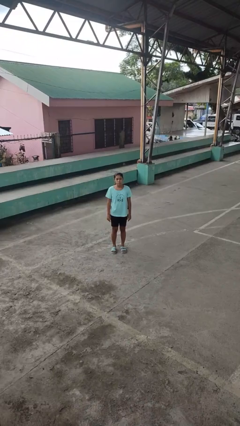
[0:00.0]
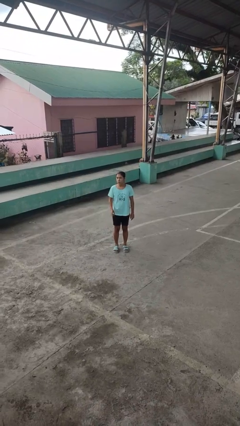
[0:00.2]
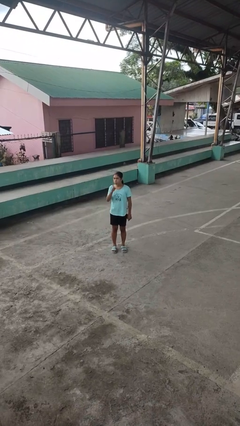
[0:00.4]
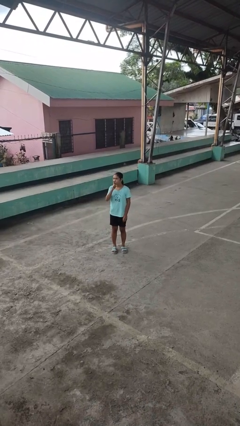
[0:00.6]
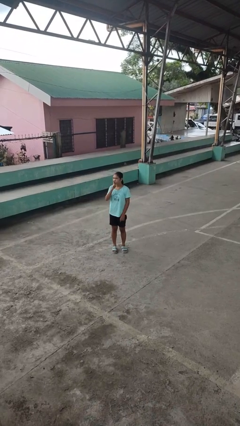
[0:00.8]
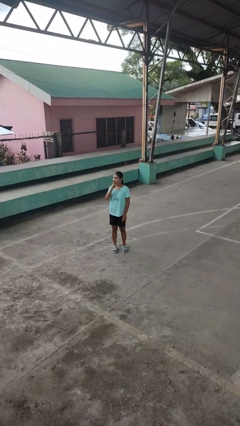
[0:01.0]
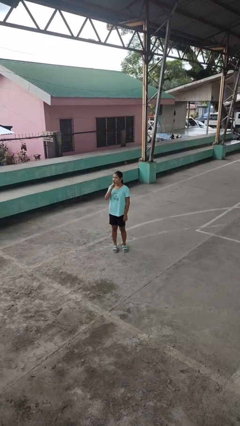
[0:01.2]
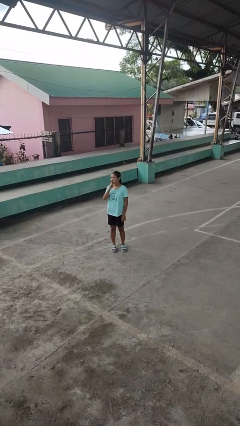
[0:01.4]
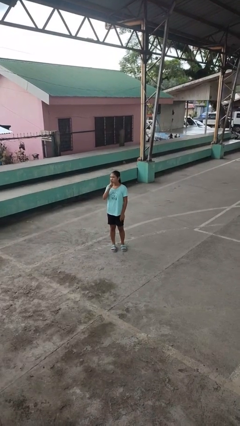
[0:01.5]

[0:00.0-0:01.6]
person gestures be quiet

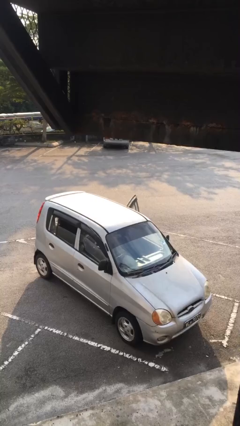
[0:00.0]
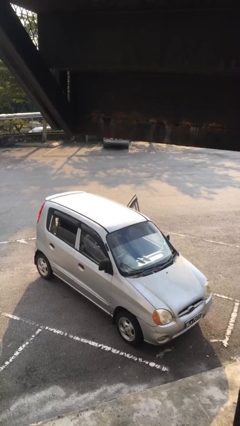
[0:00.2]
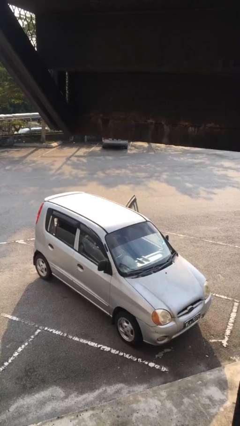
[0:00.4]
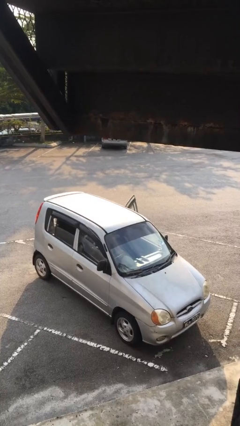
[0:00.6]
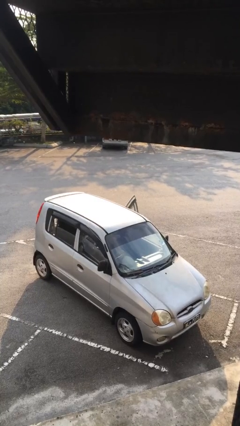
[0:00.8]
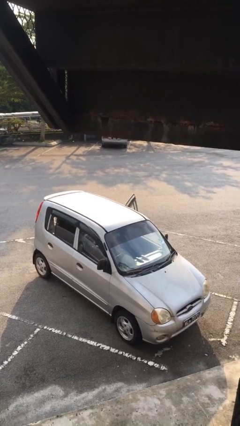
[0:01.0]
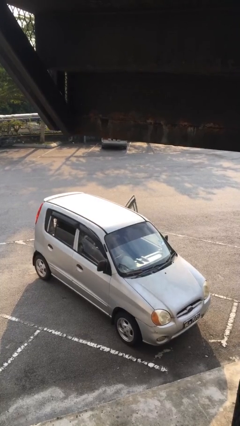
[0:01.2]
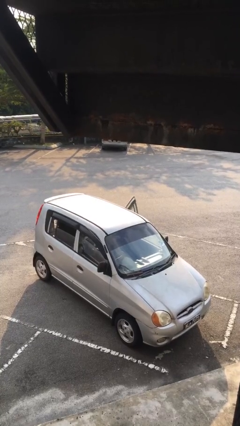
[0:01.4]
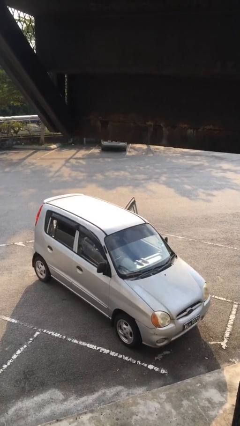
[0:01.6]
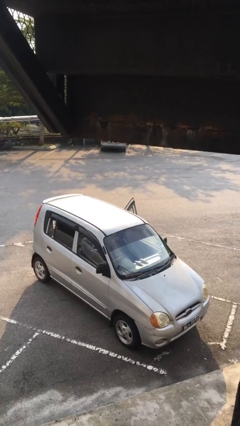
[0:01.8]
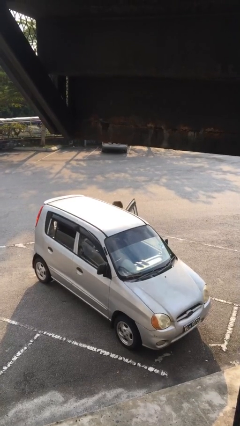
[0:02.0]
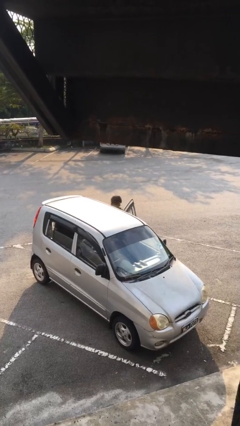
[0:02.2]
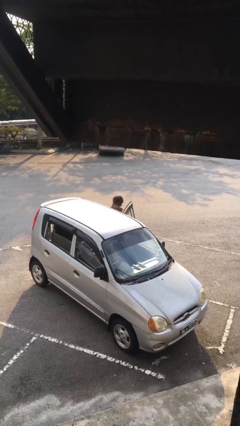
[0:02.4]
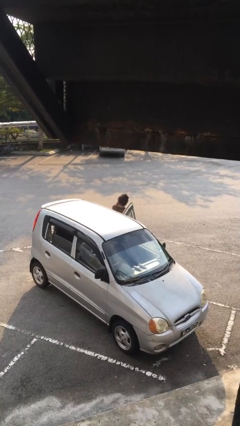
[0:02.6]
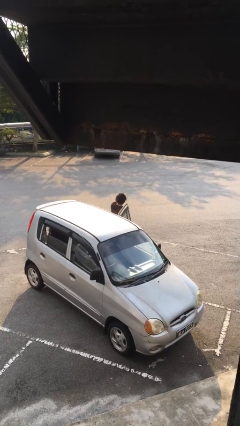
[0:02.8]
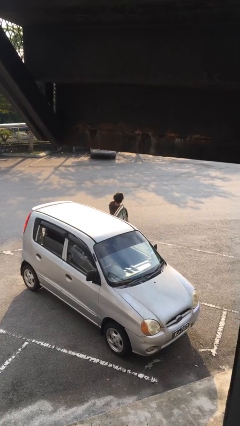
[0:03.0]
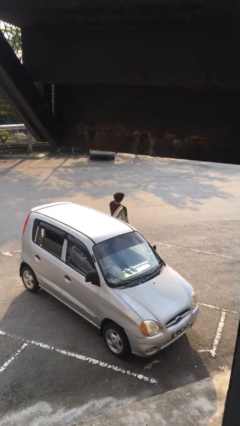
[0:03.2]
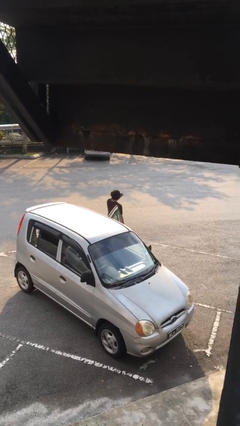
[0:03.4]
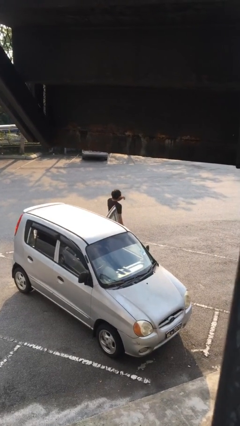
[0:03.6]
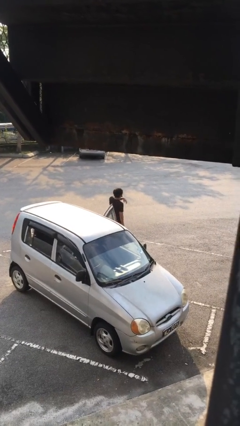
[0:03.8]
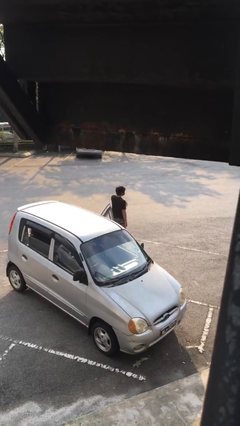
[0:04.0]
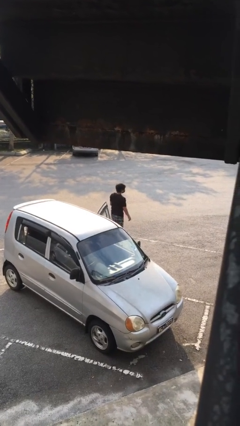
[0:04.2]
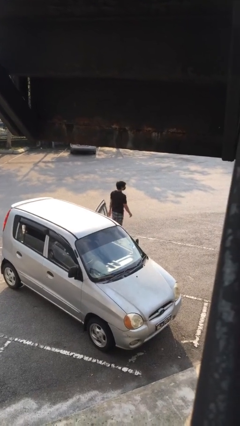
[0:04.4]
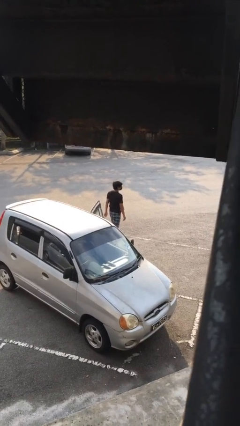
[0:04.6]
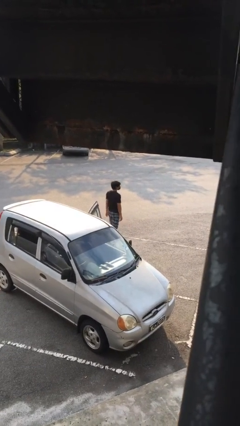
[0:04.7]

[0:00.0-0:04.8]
person exits car

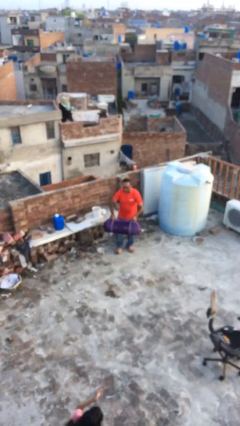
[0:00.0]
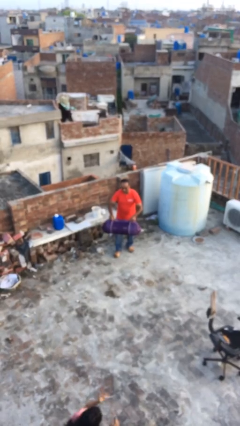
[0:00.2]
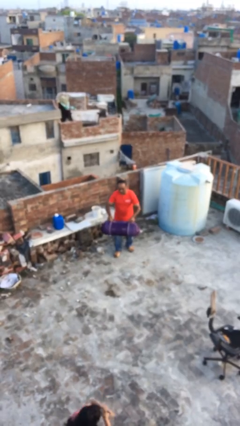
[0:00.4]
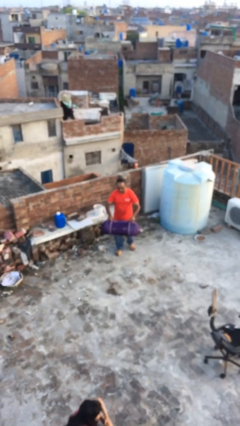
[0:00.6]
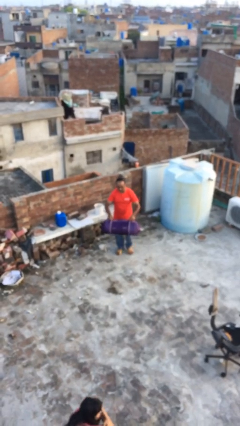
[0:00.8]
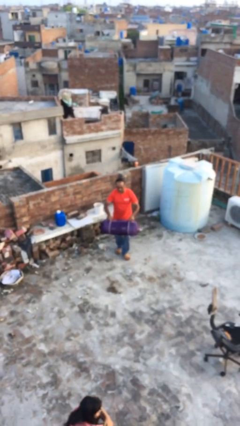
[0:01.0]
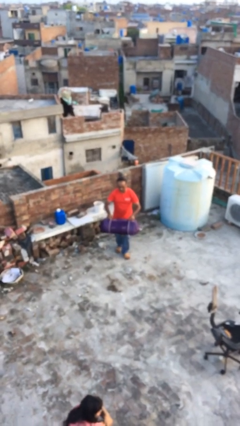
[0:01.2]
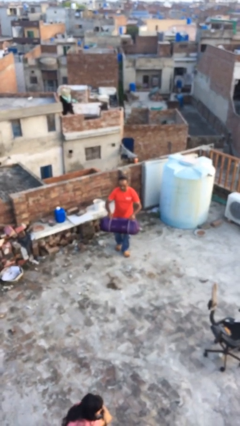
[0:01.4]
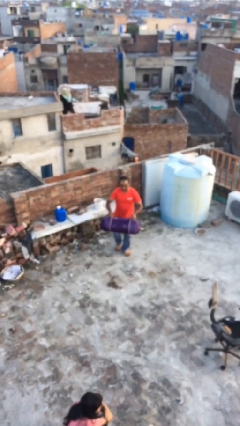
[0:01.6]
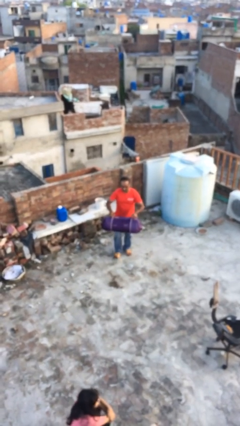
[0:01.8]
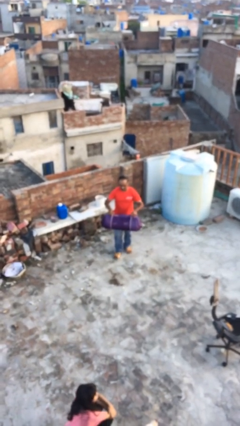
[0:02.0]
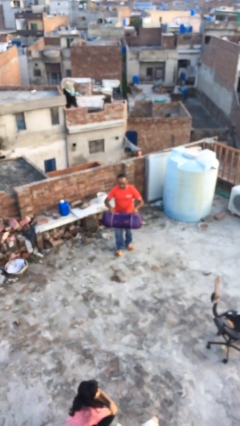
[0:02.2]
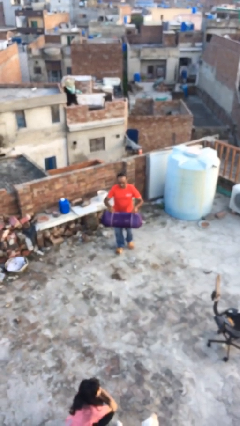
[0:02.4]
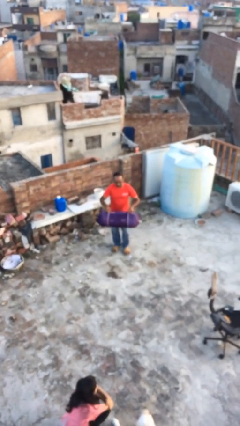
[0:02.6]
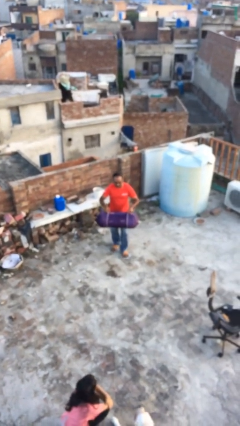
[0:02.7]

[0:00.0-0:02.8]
person carries heavy object

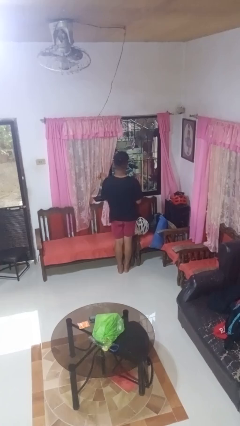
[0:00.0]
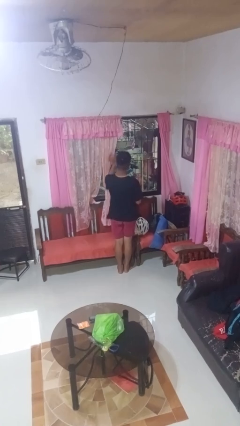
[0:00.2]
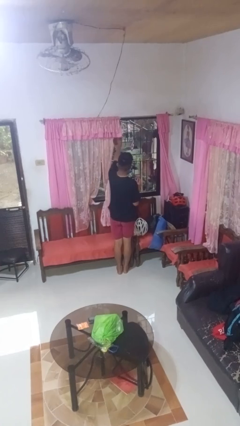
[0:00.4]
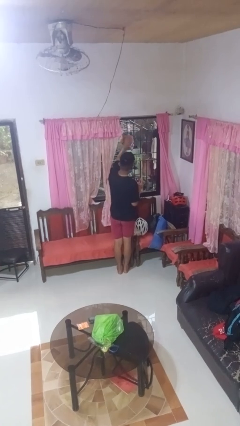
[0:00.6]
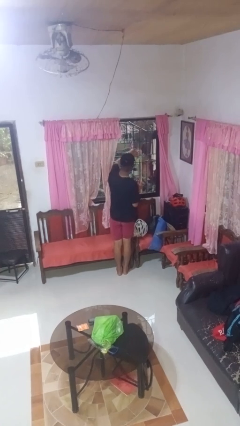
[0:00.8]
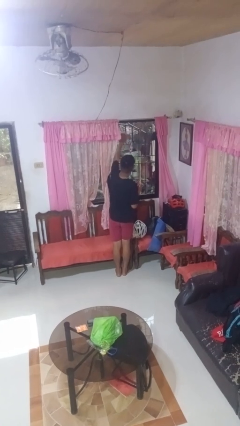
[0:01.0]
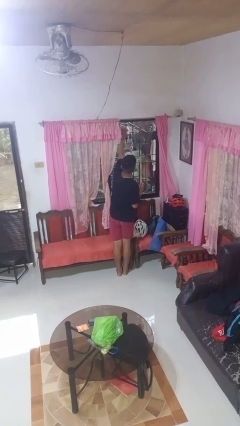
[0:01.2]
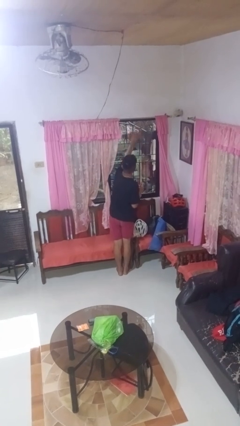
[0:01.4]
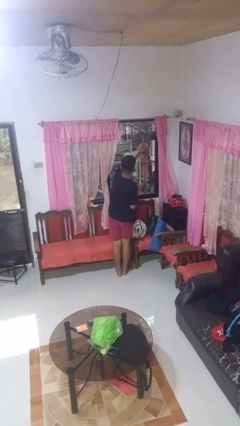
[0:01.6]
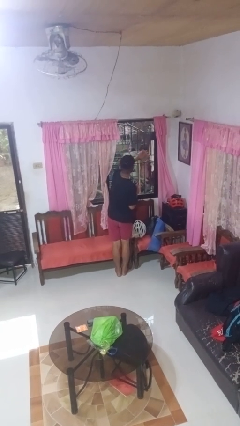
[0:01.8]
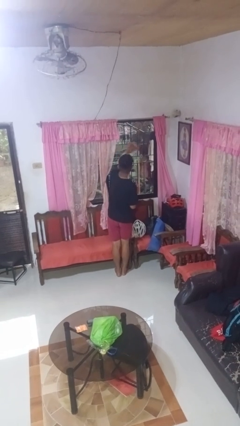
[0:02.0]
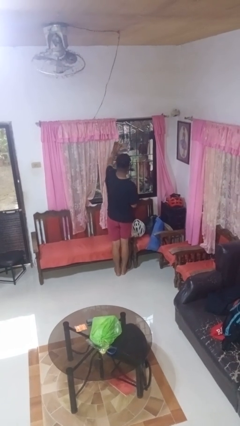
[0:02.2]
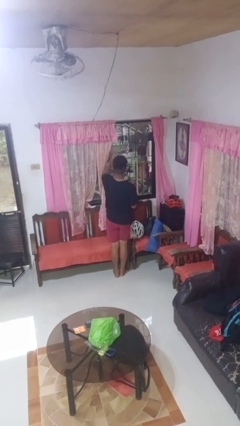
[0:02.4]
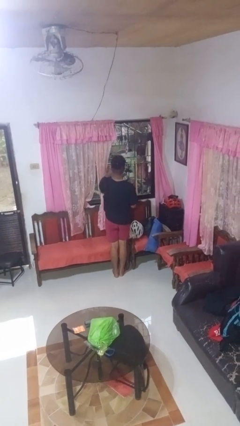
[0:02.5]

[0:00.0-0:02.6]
person washes window

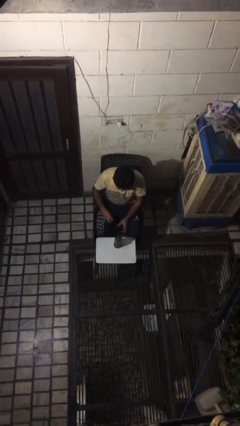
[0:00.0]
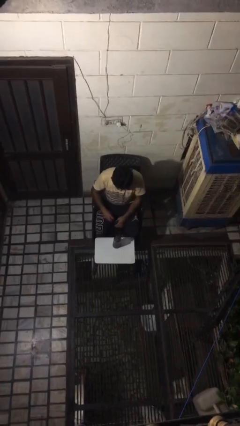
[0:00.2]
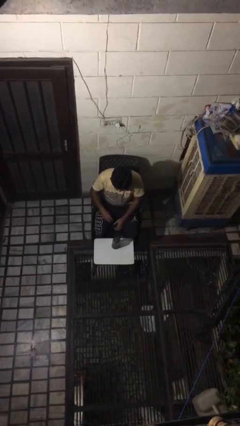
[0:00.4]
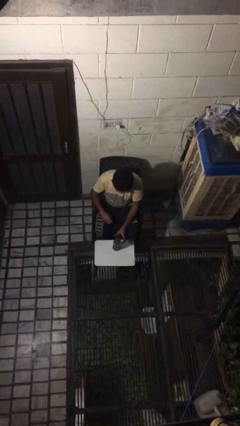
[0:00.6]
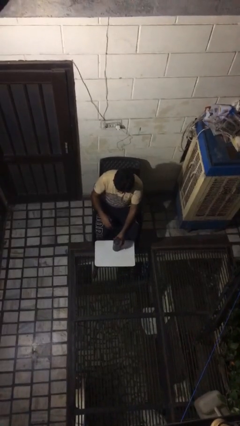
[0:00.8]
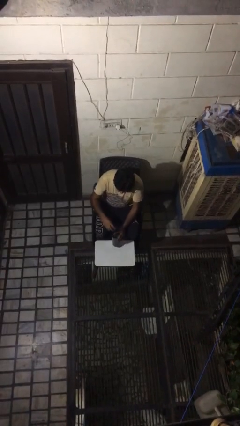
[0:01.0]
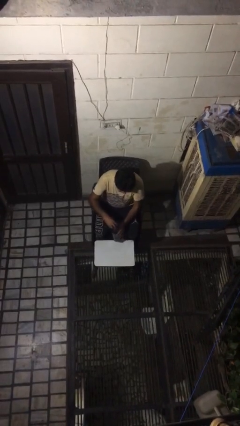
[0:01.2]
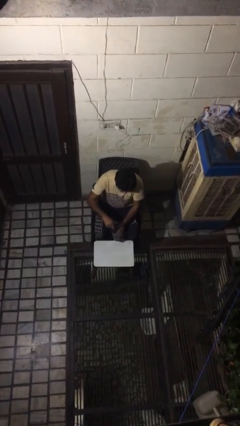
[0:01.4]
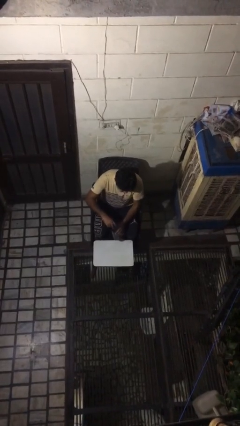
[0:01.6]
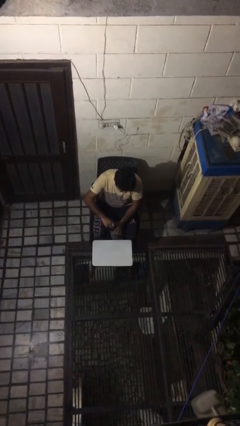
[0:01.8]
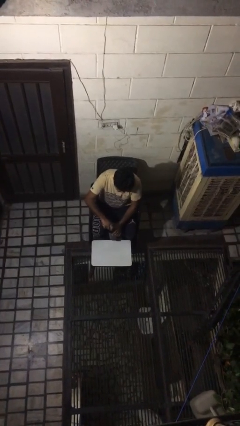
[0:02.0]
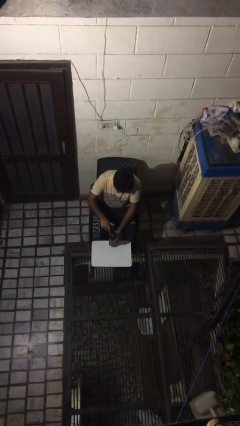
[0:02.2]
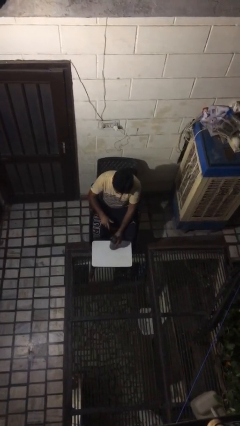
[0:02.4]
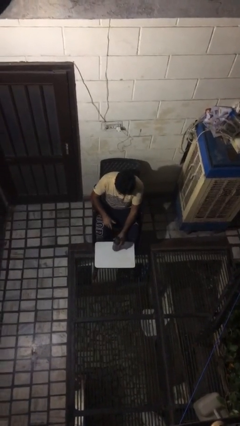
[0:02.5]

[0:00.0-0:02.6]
person screws lid to bottle

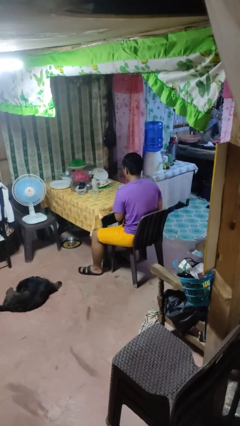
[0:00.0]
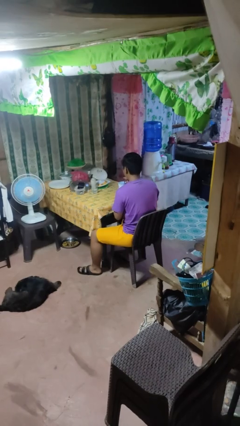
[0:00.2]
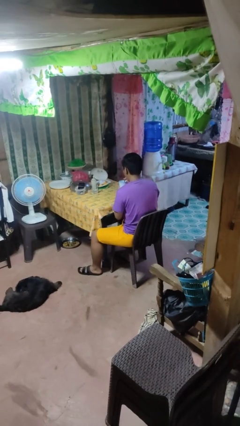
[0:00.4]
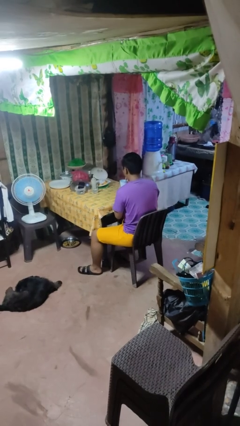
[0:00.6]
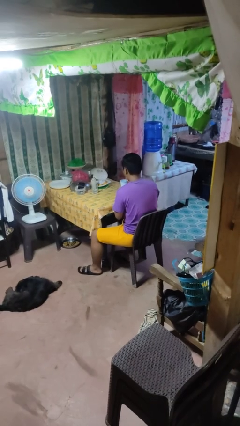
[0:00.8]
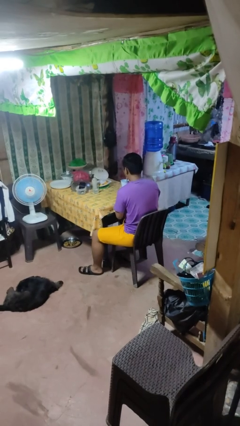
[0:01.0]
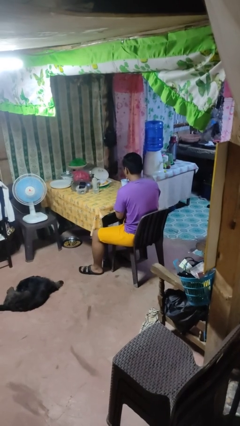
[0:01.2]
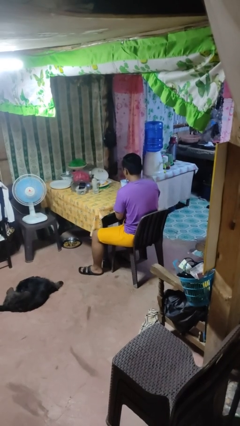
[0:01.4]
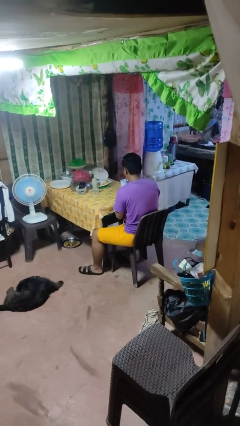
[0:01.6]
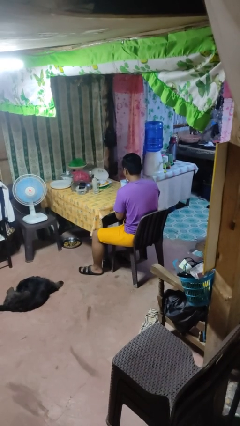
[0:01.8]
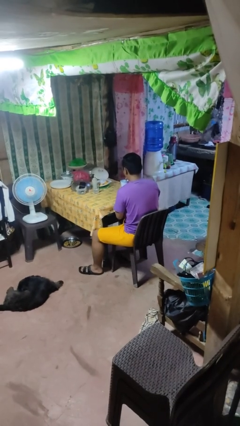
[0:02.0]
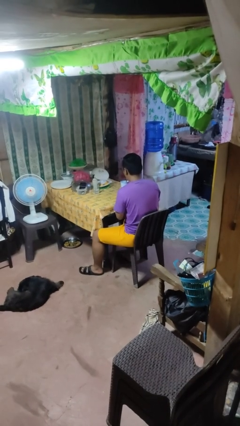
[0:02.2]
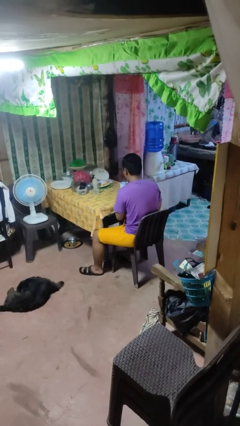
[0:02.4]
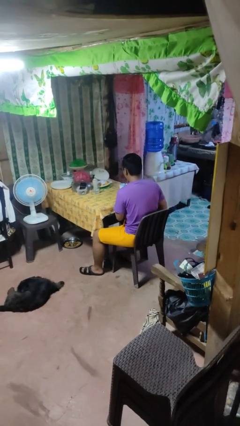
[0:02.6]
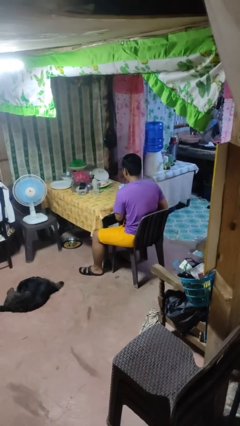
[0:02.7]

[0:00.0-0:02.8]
person drinks from straw

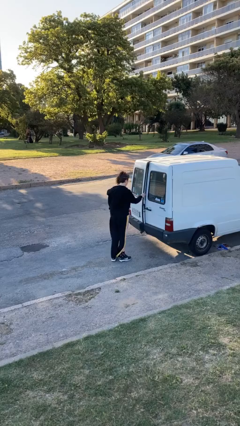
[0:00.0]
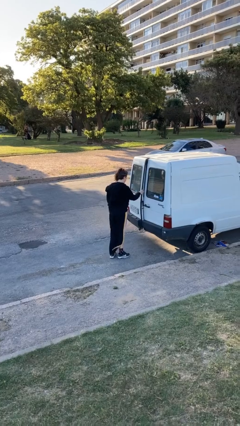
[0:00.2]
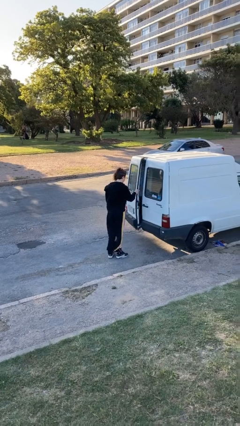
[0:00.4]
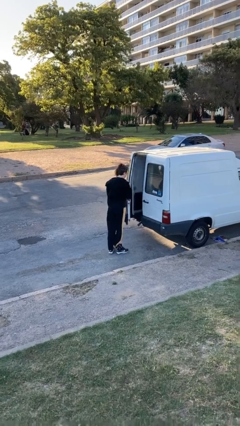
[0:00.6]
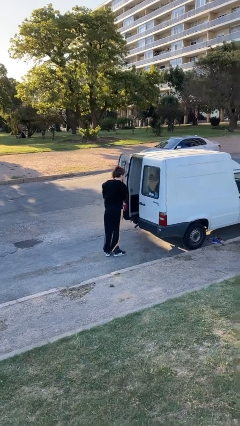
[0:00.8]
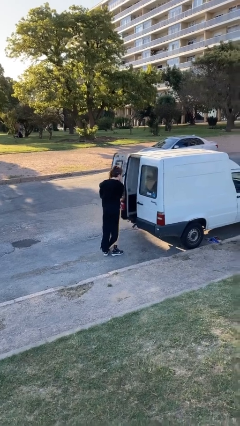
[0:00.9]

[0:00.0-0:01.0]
person opens car door
